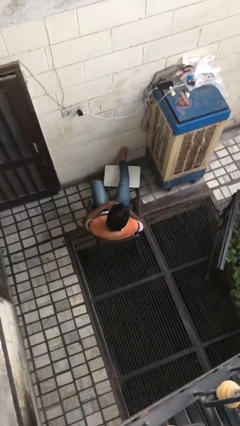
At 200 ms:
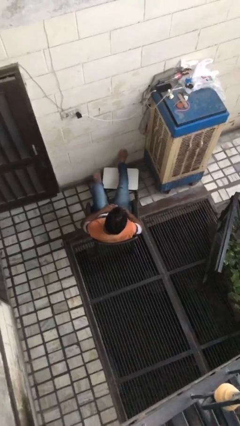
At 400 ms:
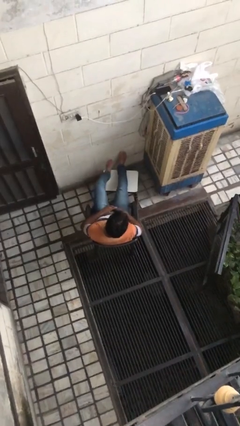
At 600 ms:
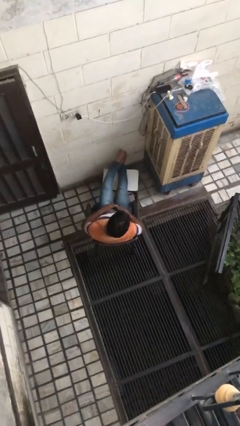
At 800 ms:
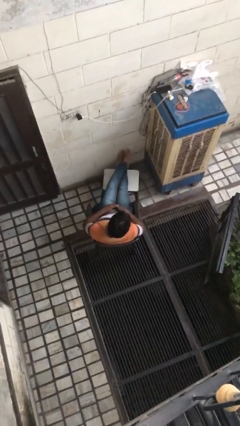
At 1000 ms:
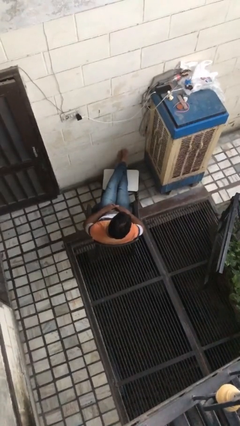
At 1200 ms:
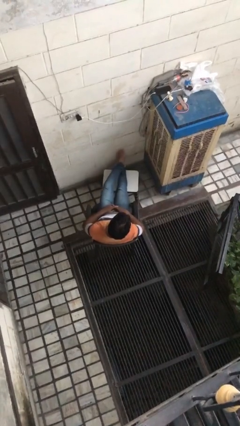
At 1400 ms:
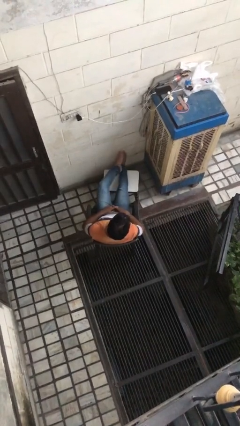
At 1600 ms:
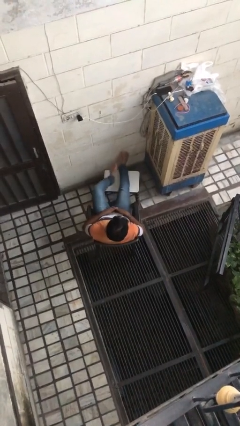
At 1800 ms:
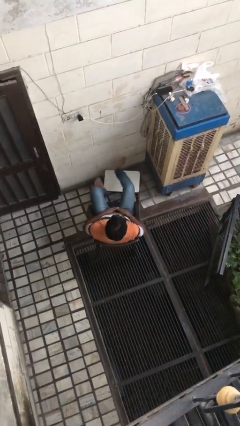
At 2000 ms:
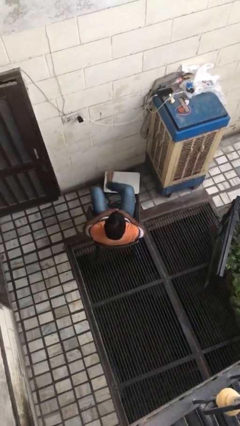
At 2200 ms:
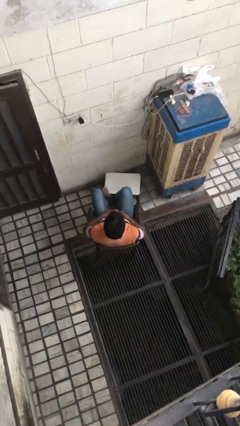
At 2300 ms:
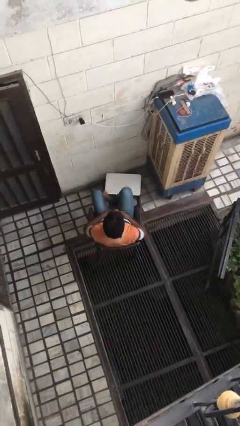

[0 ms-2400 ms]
person puts feet up

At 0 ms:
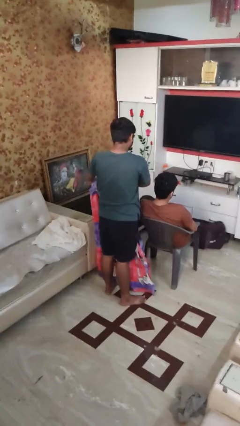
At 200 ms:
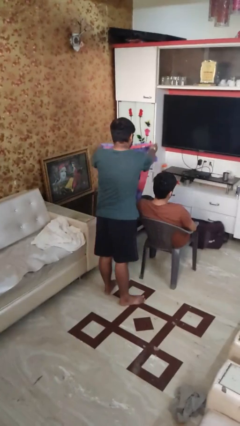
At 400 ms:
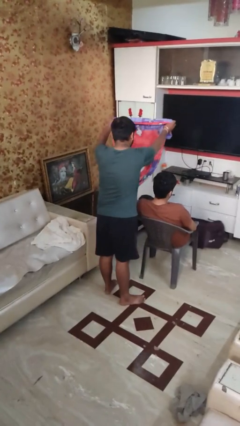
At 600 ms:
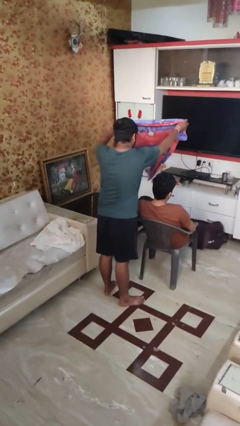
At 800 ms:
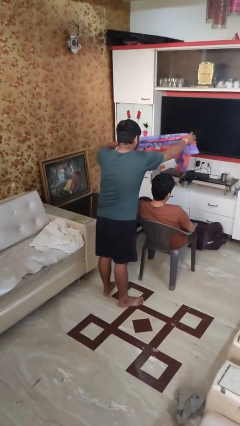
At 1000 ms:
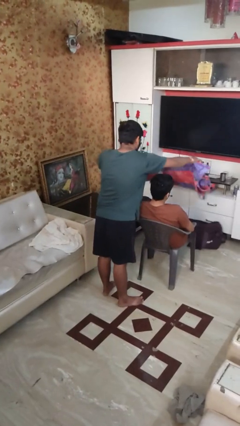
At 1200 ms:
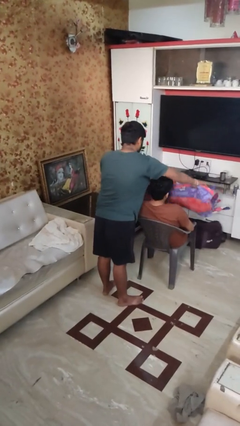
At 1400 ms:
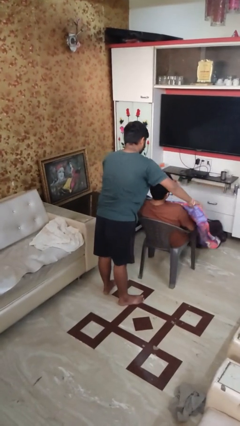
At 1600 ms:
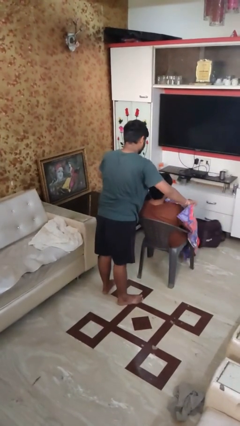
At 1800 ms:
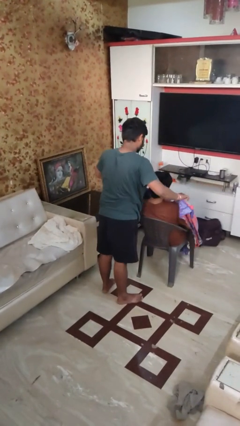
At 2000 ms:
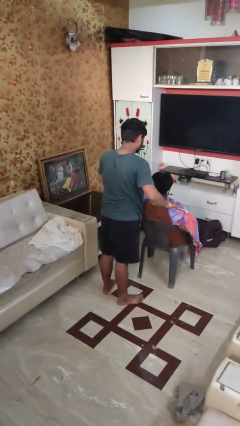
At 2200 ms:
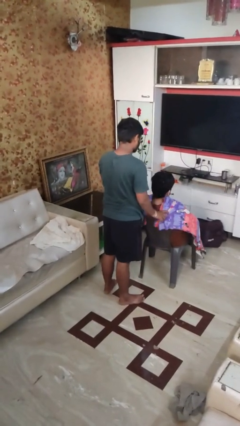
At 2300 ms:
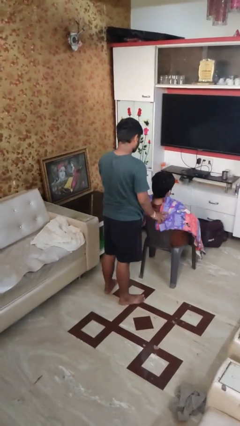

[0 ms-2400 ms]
person covers friend with blanket

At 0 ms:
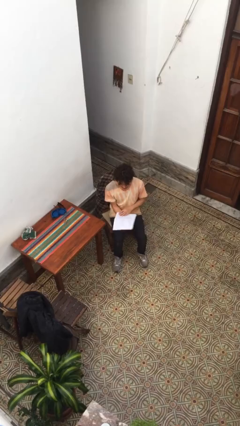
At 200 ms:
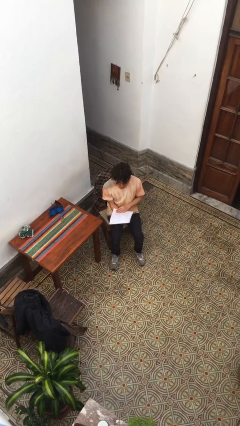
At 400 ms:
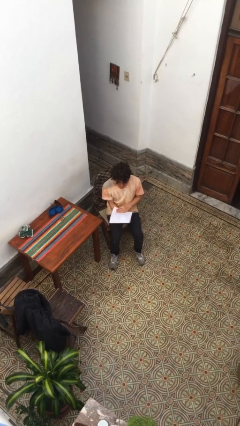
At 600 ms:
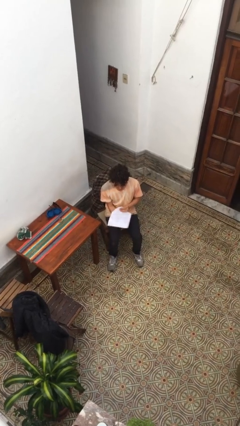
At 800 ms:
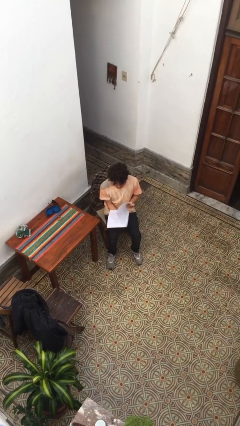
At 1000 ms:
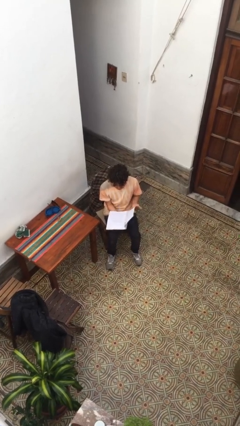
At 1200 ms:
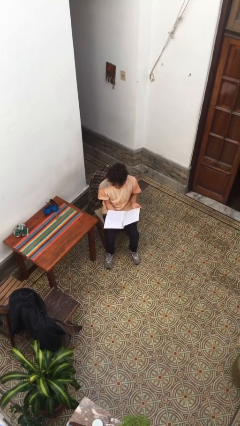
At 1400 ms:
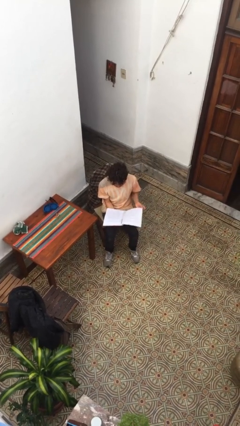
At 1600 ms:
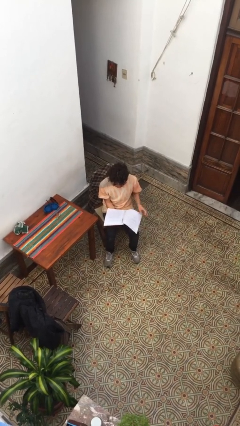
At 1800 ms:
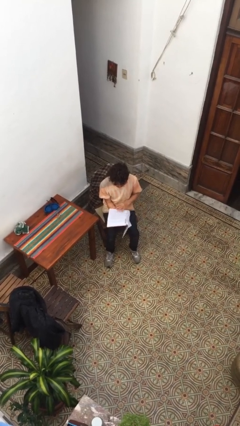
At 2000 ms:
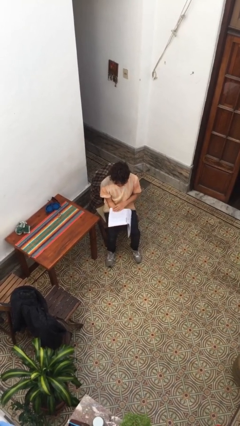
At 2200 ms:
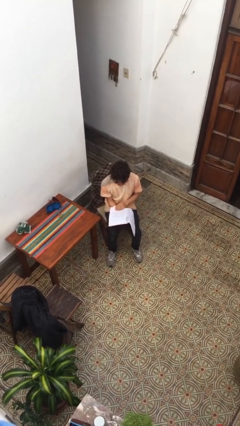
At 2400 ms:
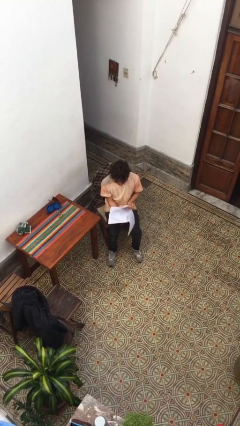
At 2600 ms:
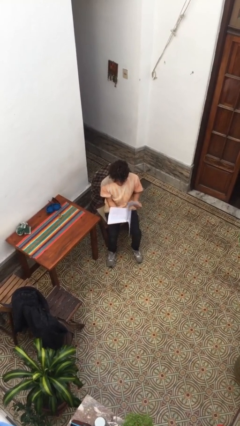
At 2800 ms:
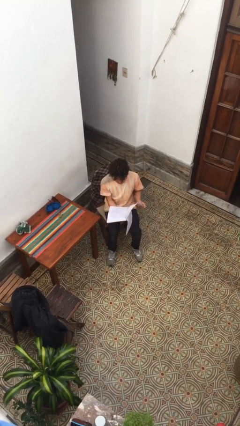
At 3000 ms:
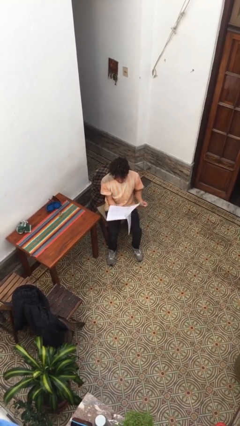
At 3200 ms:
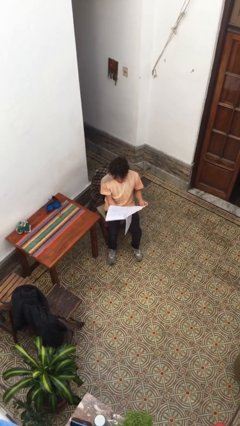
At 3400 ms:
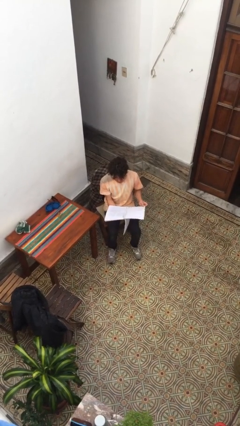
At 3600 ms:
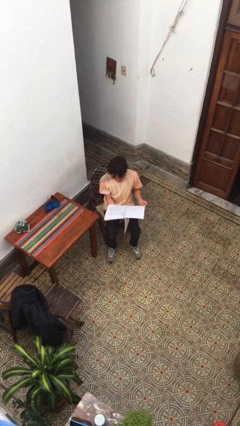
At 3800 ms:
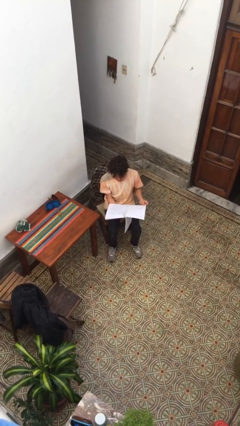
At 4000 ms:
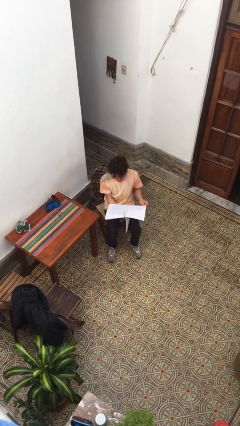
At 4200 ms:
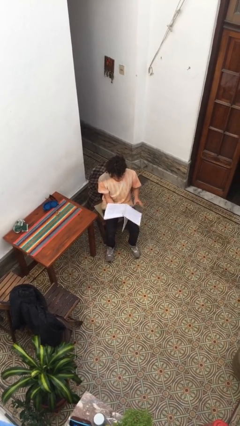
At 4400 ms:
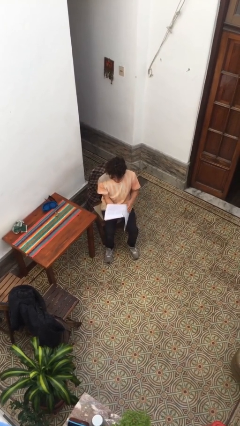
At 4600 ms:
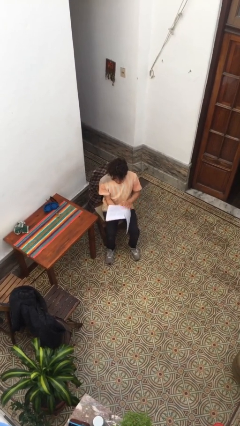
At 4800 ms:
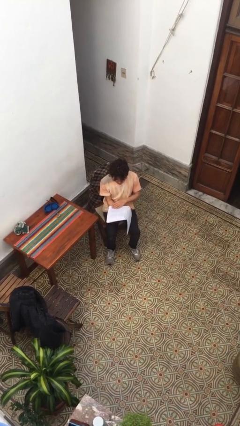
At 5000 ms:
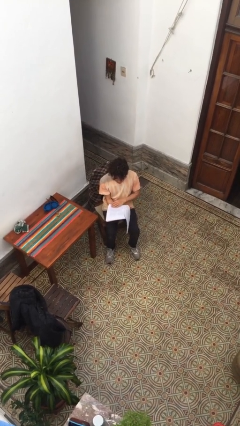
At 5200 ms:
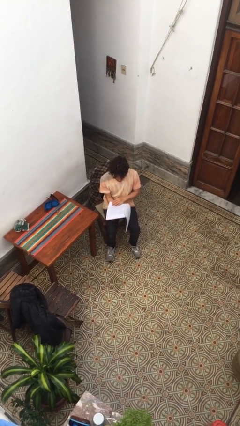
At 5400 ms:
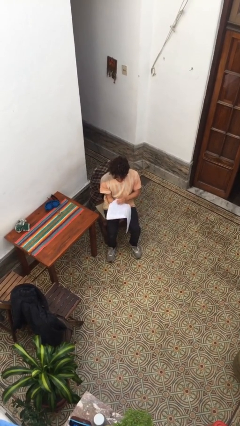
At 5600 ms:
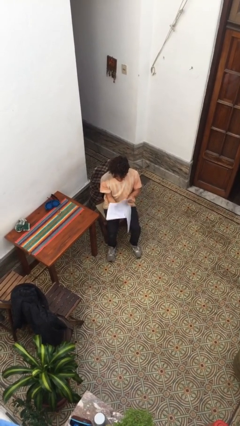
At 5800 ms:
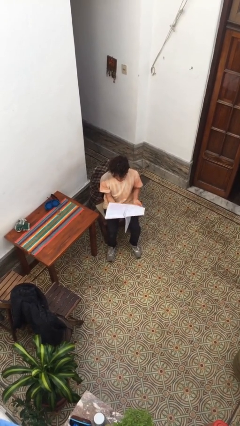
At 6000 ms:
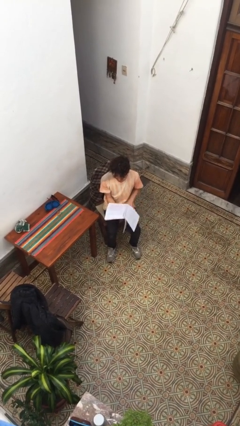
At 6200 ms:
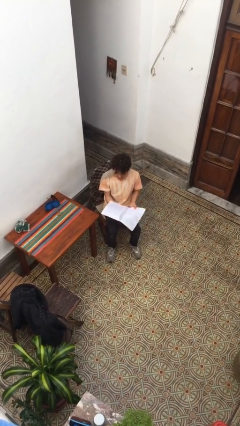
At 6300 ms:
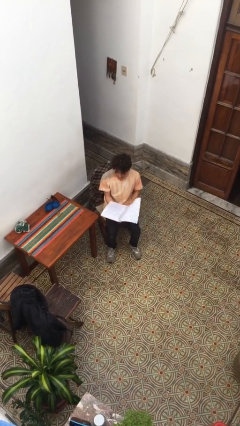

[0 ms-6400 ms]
person reads document

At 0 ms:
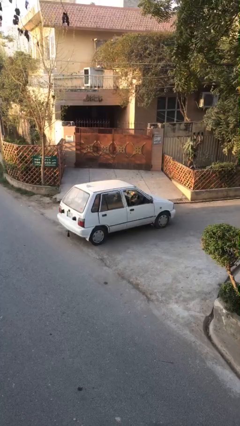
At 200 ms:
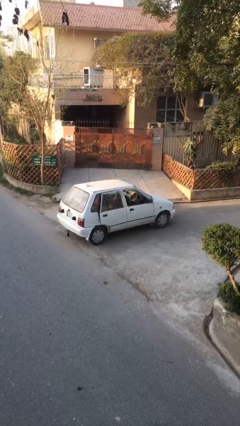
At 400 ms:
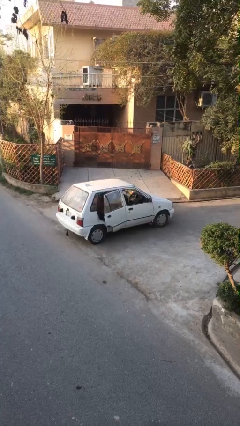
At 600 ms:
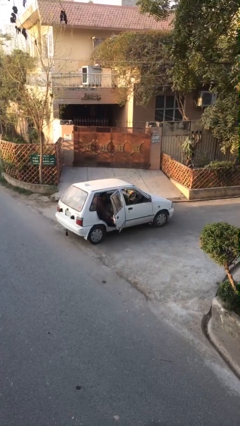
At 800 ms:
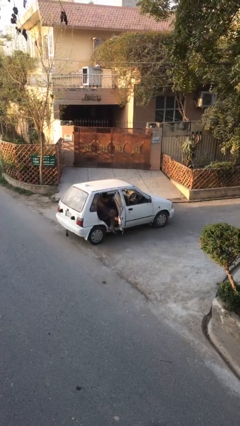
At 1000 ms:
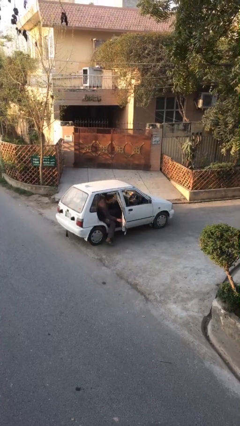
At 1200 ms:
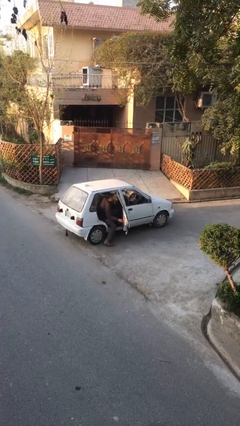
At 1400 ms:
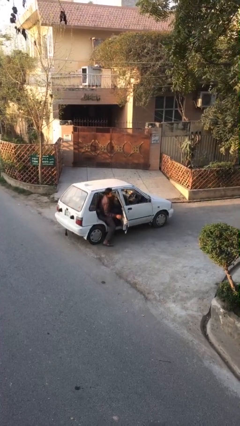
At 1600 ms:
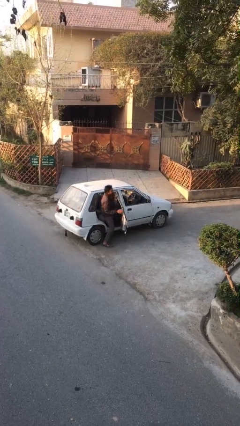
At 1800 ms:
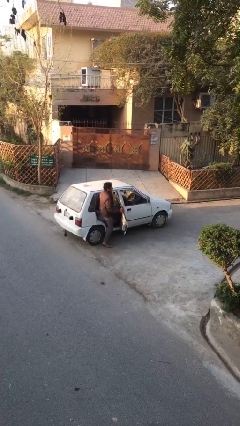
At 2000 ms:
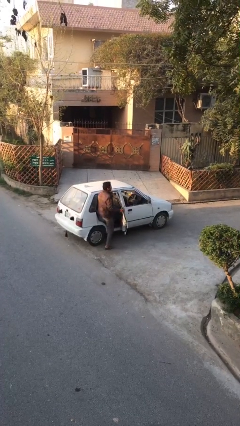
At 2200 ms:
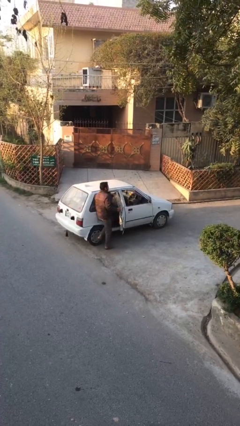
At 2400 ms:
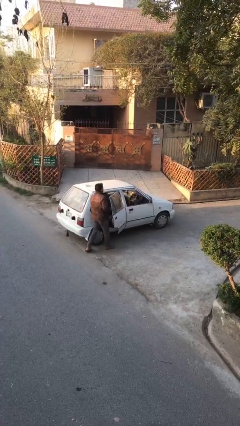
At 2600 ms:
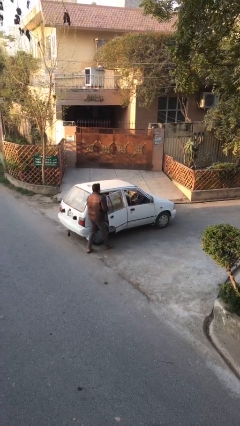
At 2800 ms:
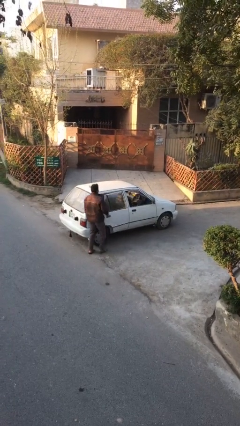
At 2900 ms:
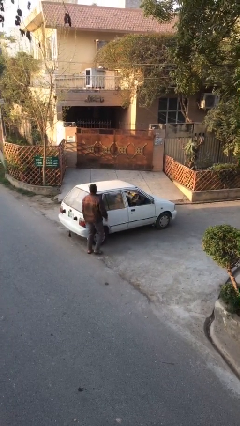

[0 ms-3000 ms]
car drops off person

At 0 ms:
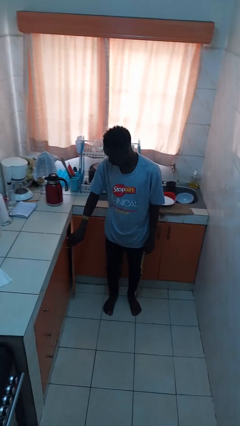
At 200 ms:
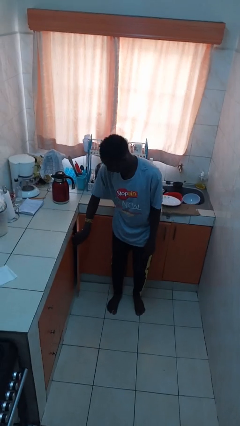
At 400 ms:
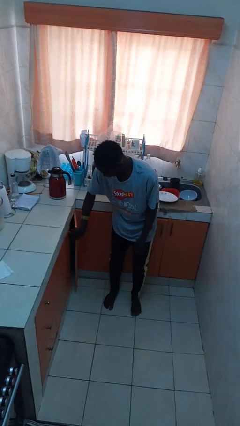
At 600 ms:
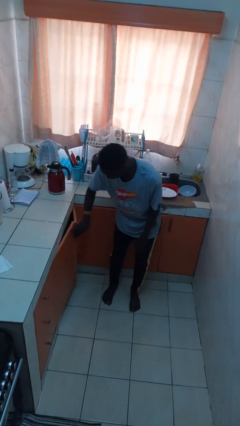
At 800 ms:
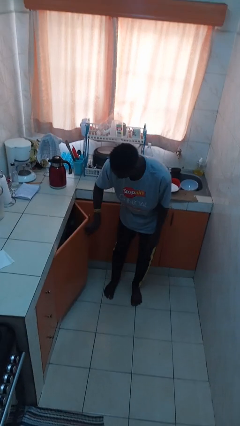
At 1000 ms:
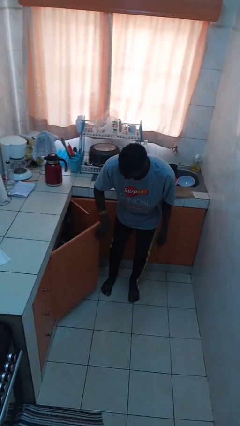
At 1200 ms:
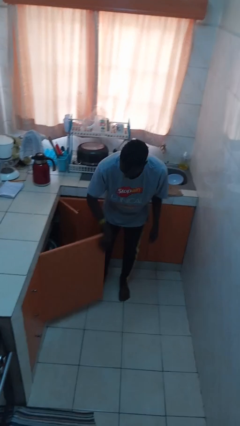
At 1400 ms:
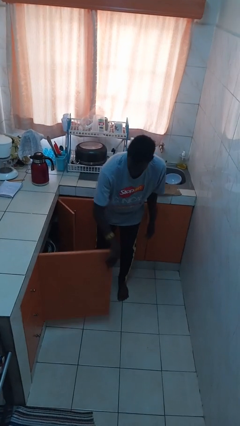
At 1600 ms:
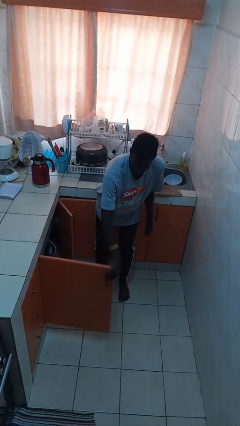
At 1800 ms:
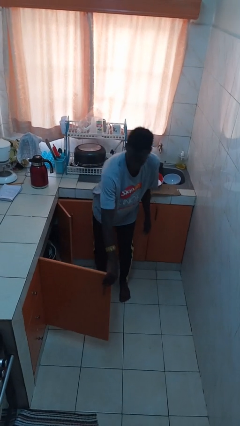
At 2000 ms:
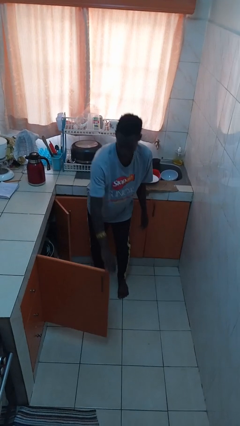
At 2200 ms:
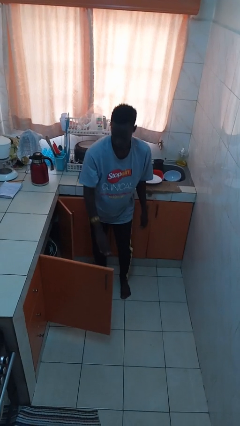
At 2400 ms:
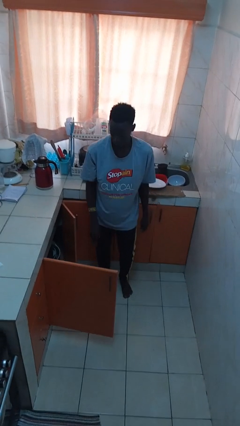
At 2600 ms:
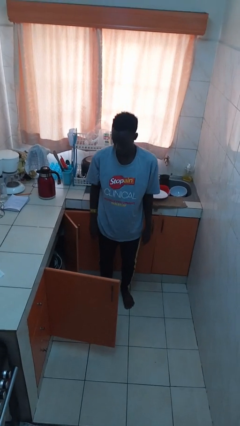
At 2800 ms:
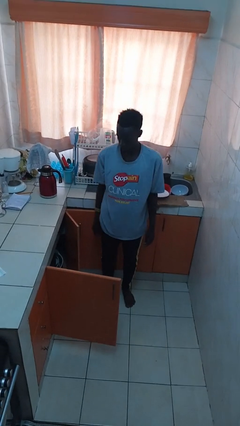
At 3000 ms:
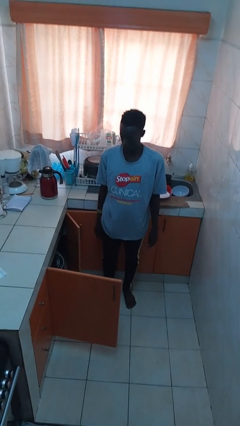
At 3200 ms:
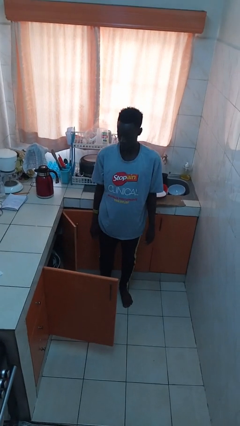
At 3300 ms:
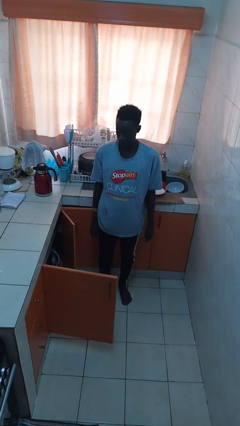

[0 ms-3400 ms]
person opens cabinet
